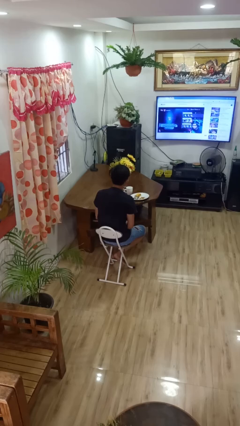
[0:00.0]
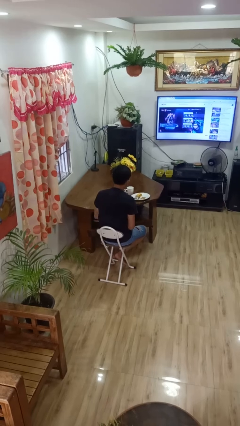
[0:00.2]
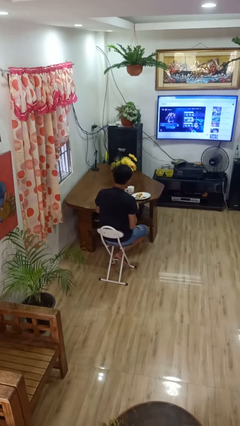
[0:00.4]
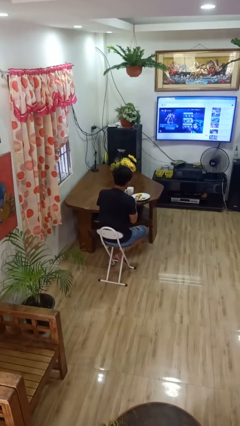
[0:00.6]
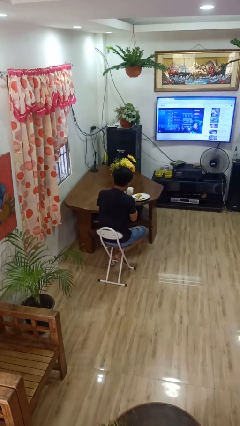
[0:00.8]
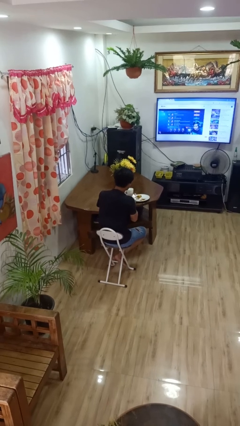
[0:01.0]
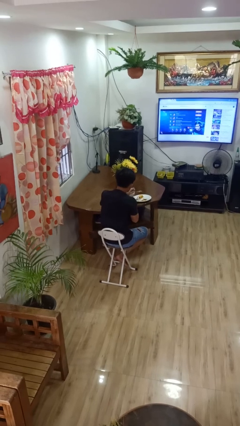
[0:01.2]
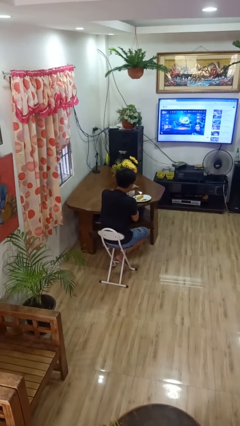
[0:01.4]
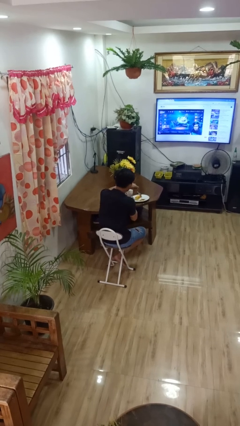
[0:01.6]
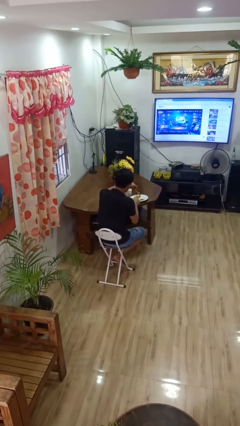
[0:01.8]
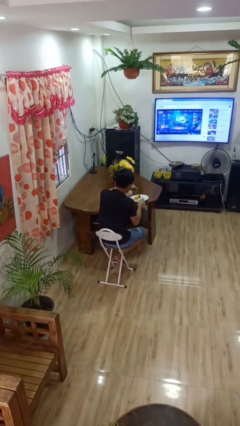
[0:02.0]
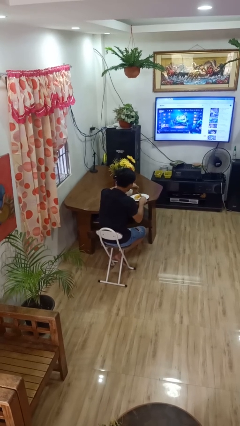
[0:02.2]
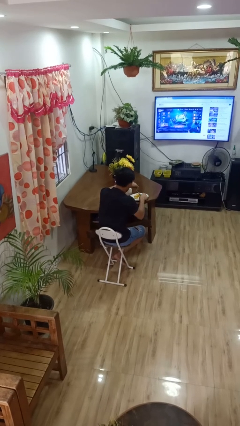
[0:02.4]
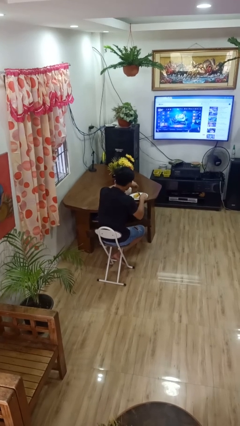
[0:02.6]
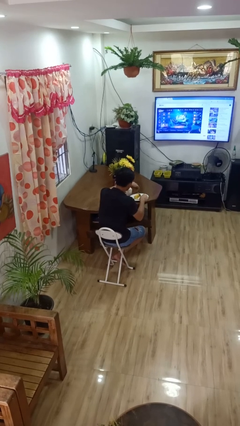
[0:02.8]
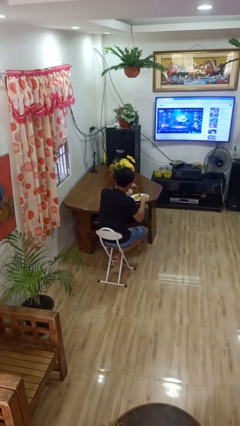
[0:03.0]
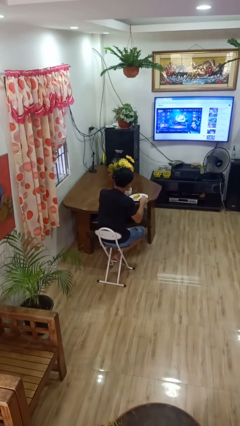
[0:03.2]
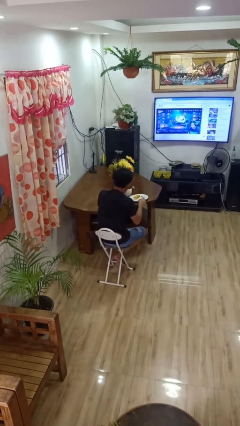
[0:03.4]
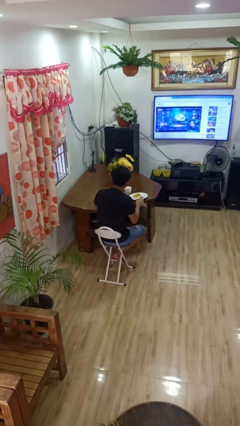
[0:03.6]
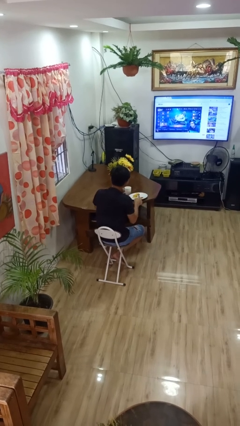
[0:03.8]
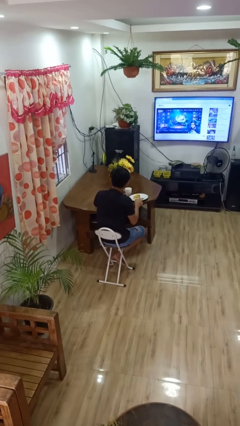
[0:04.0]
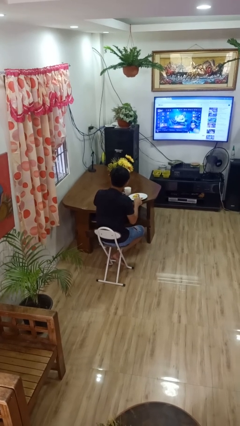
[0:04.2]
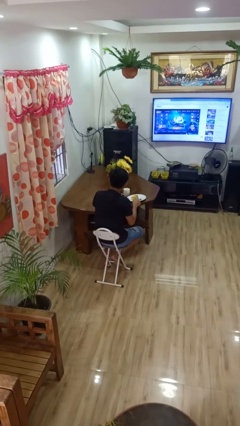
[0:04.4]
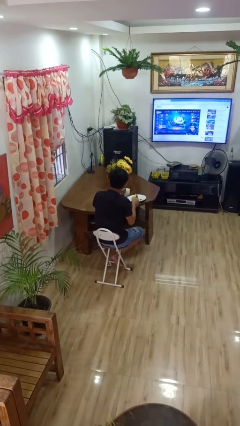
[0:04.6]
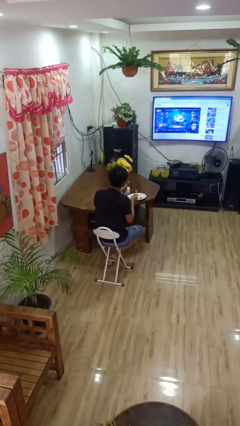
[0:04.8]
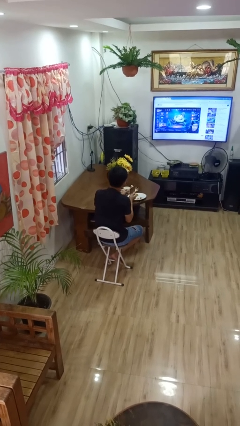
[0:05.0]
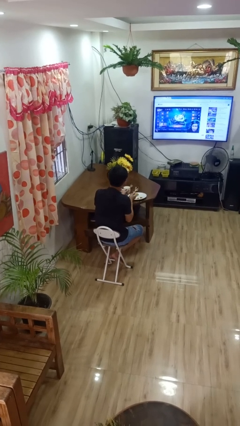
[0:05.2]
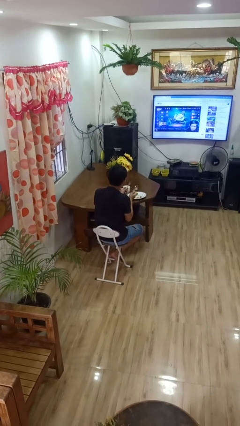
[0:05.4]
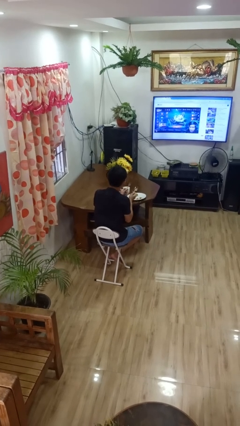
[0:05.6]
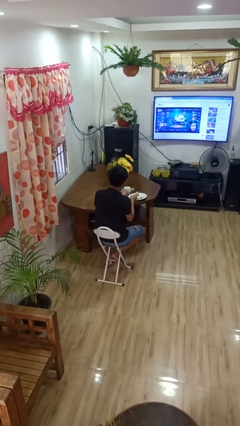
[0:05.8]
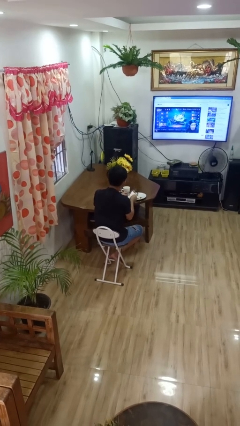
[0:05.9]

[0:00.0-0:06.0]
person eats with utensil

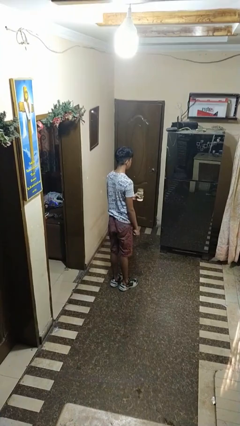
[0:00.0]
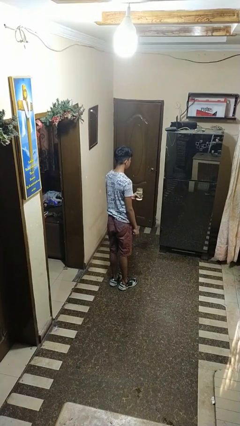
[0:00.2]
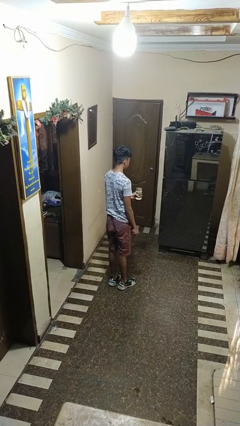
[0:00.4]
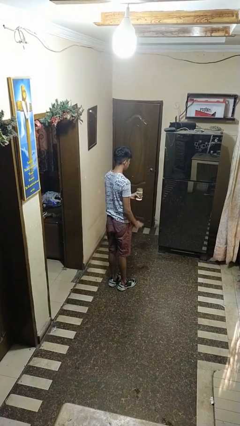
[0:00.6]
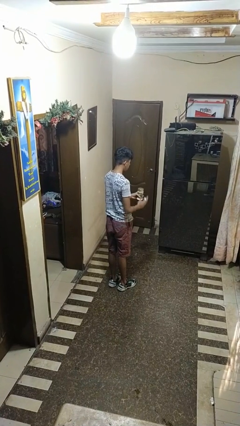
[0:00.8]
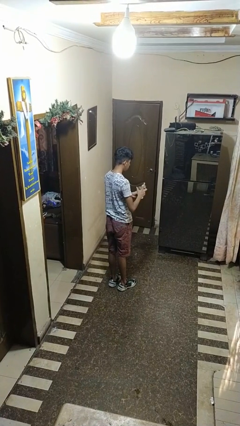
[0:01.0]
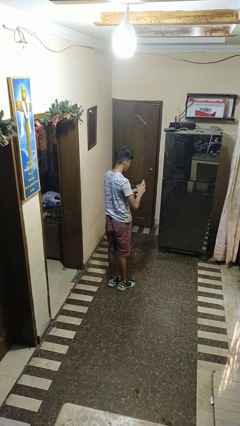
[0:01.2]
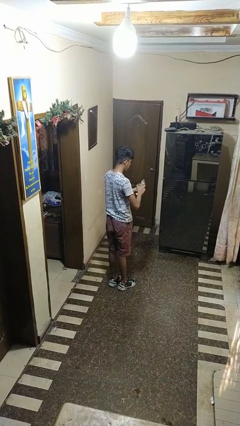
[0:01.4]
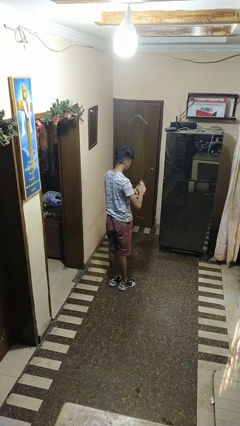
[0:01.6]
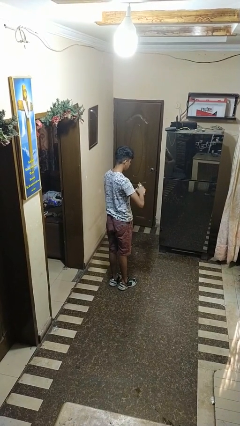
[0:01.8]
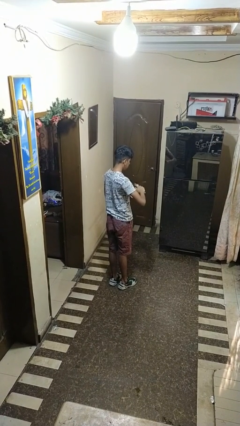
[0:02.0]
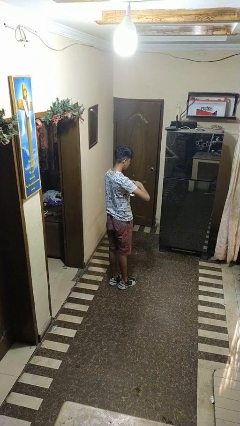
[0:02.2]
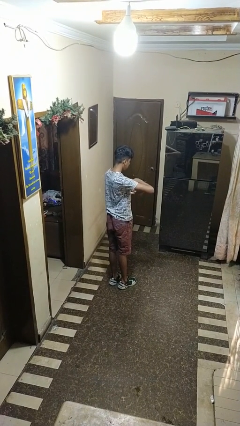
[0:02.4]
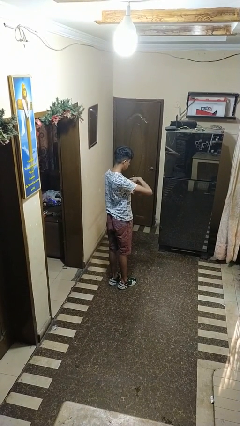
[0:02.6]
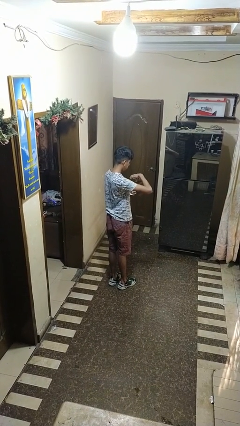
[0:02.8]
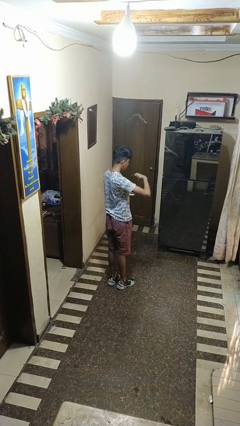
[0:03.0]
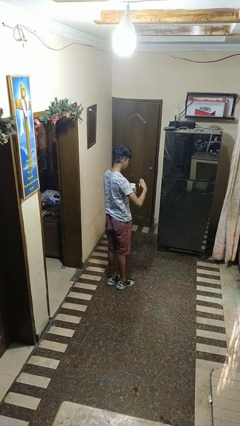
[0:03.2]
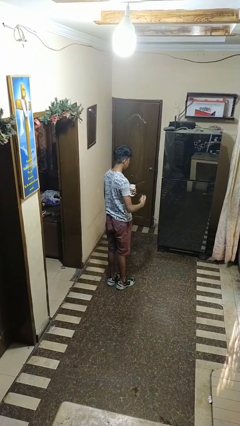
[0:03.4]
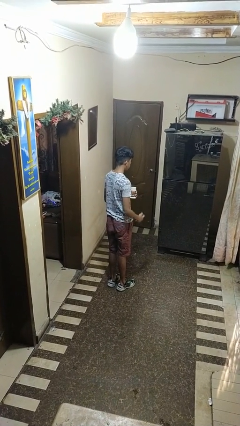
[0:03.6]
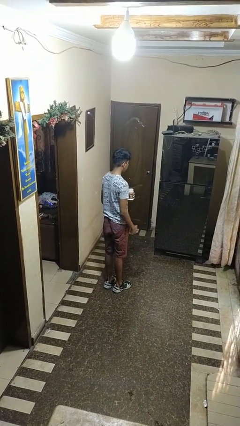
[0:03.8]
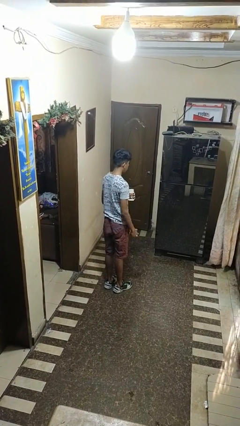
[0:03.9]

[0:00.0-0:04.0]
person opens can with can opener

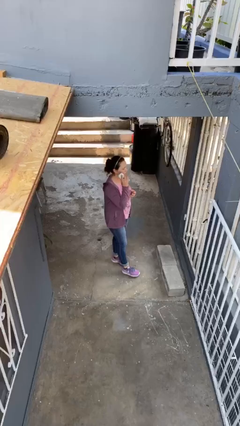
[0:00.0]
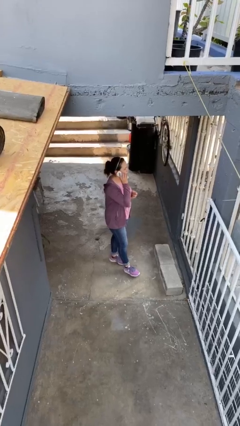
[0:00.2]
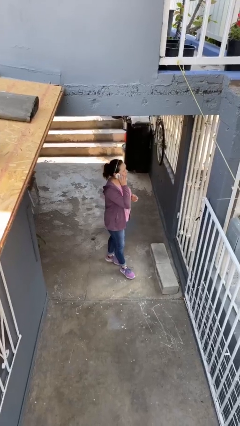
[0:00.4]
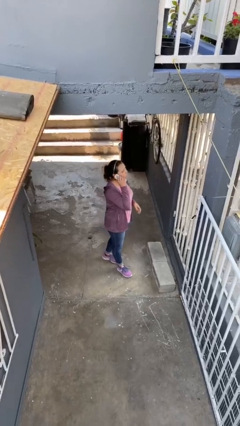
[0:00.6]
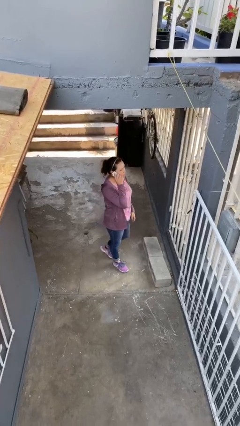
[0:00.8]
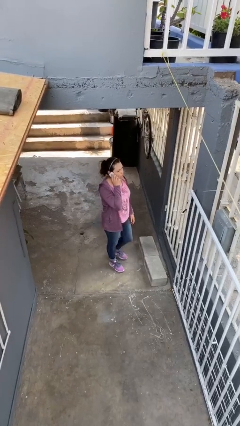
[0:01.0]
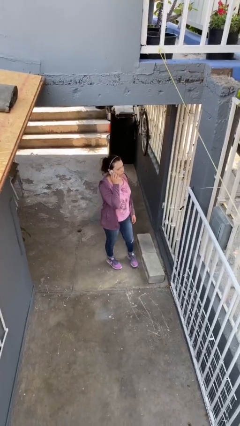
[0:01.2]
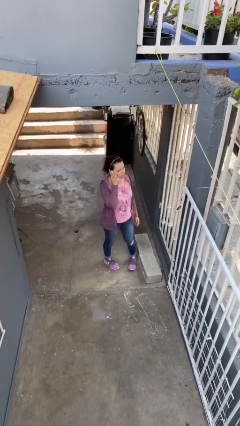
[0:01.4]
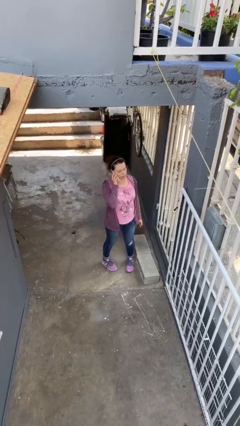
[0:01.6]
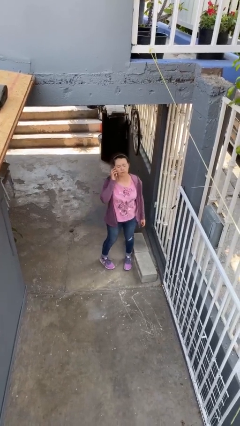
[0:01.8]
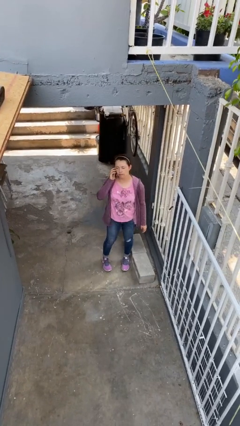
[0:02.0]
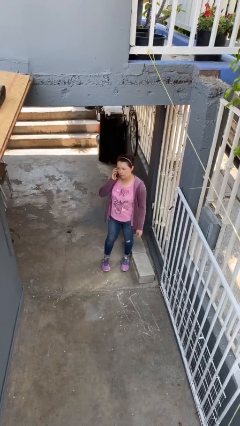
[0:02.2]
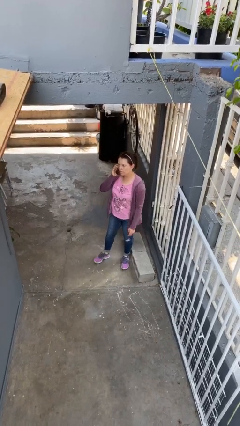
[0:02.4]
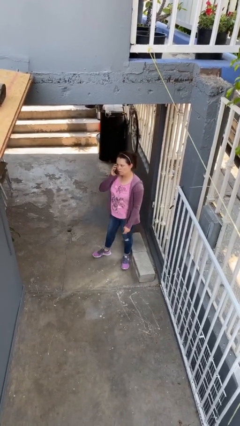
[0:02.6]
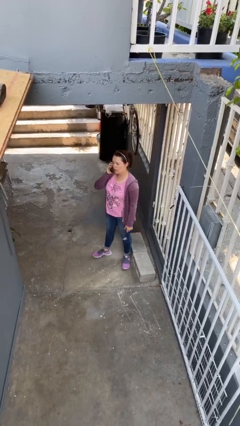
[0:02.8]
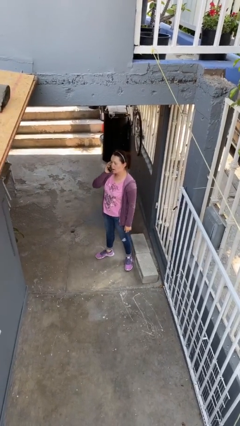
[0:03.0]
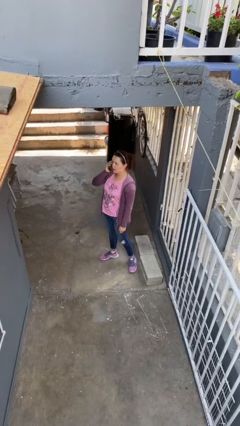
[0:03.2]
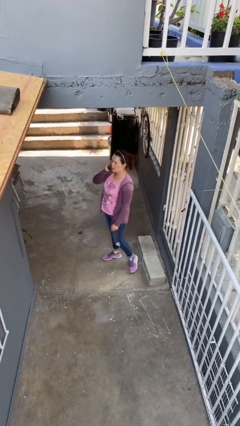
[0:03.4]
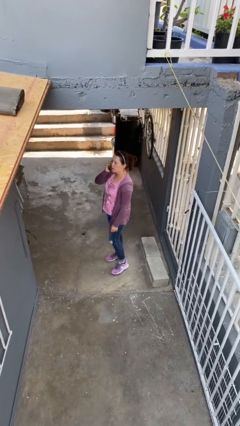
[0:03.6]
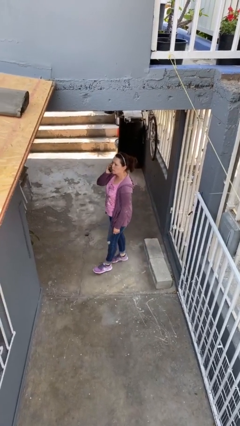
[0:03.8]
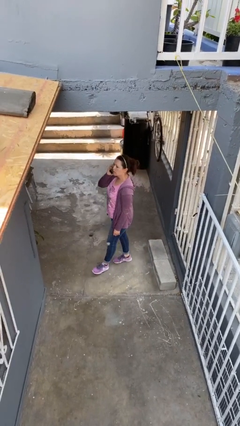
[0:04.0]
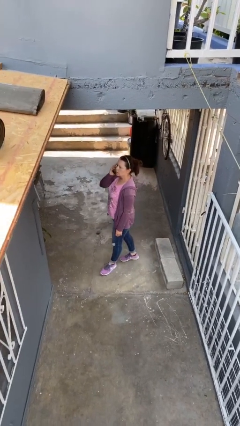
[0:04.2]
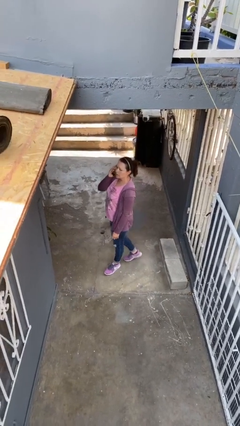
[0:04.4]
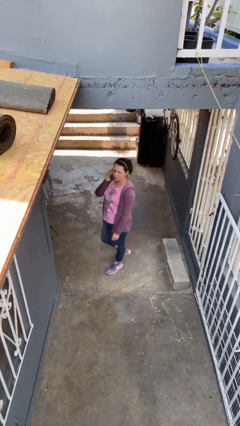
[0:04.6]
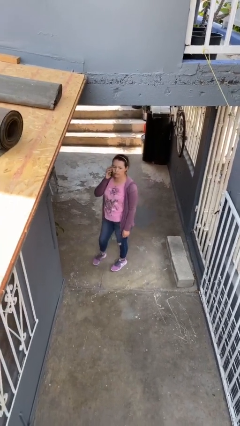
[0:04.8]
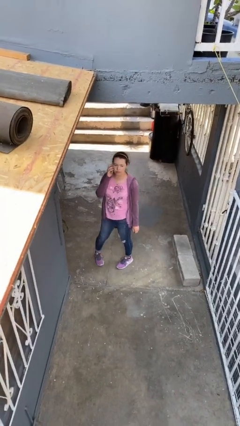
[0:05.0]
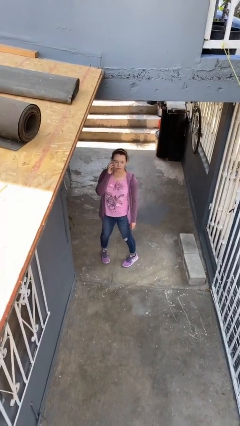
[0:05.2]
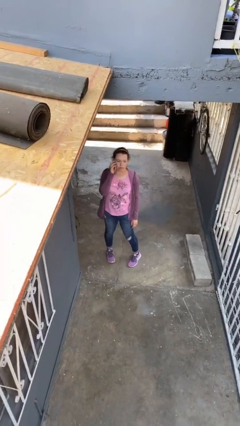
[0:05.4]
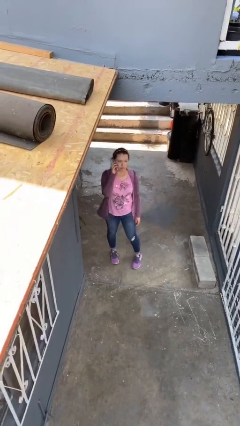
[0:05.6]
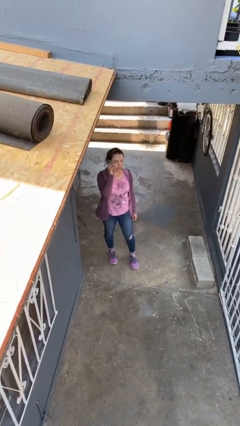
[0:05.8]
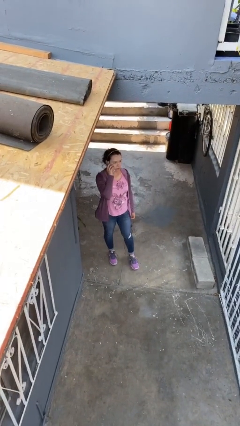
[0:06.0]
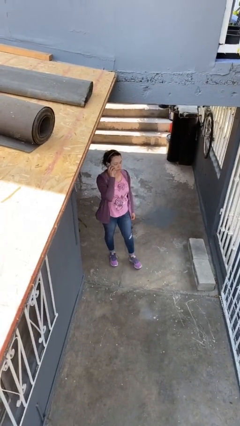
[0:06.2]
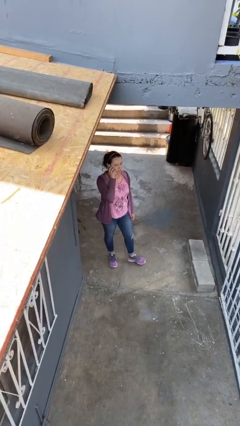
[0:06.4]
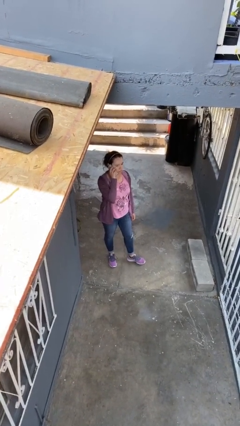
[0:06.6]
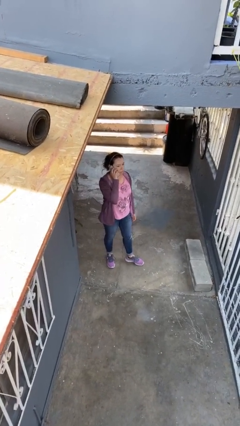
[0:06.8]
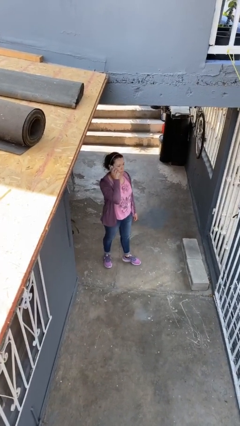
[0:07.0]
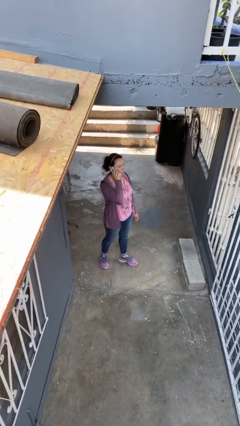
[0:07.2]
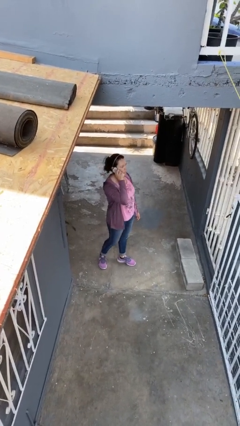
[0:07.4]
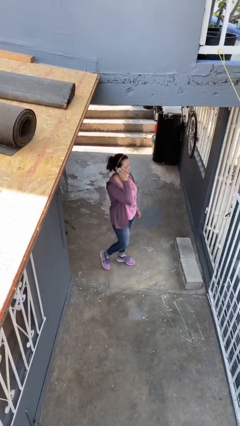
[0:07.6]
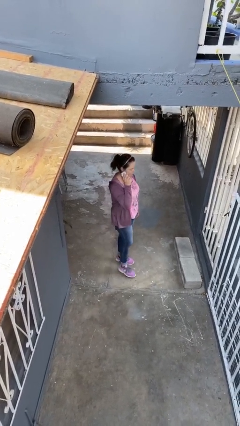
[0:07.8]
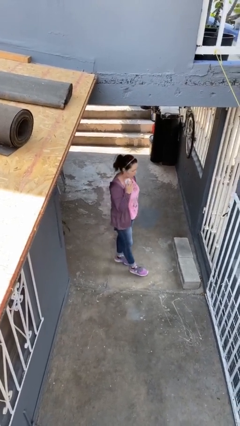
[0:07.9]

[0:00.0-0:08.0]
person talks on phone

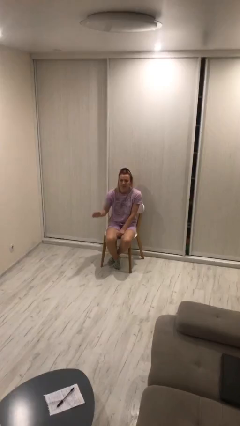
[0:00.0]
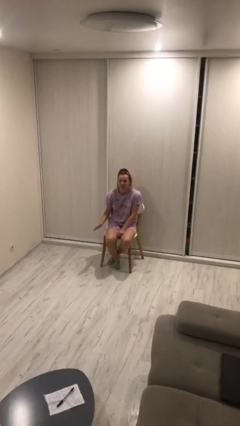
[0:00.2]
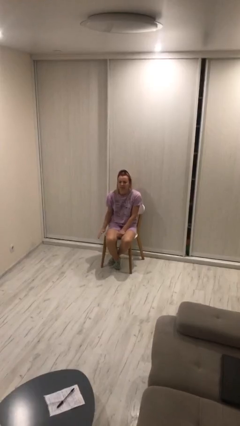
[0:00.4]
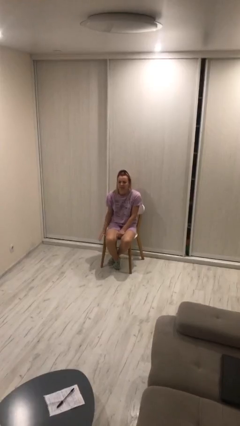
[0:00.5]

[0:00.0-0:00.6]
person gestures lower hand
